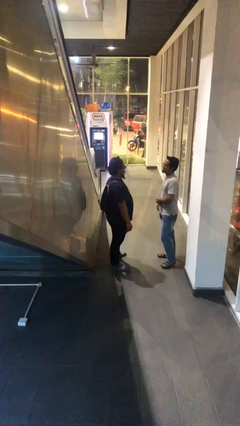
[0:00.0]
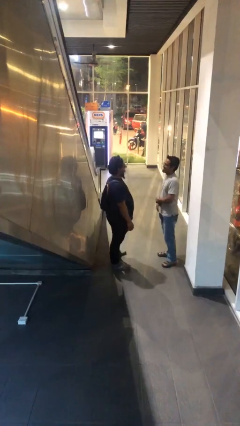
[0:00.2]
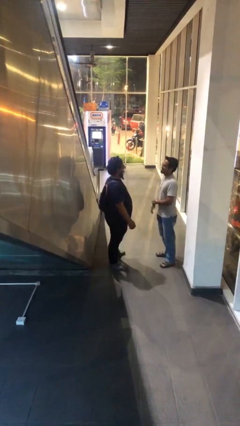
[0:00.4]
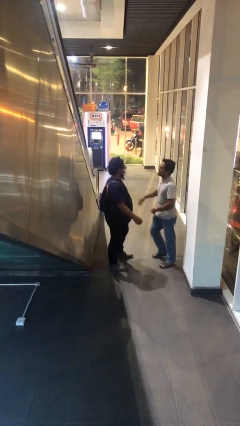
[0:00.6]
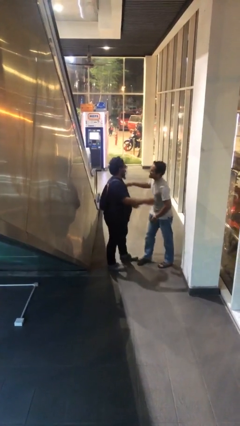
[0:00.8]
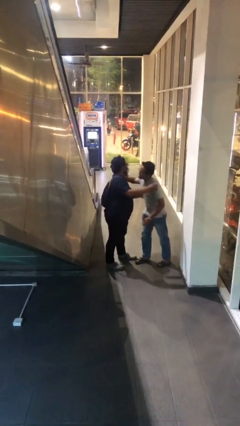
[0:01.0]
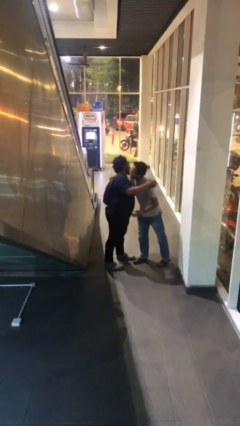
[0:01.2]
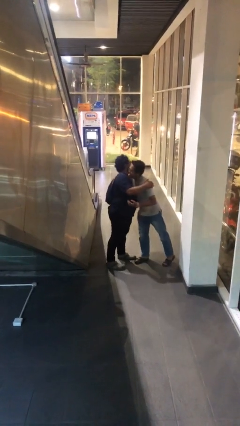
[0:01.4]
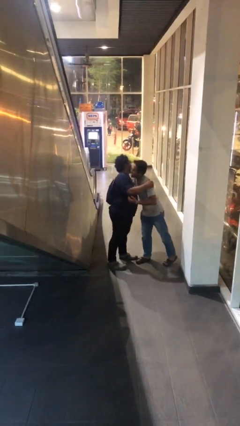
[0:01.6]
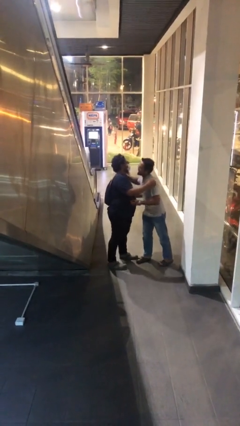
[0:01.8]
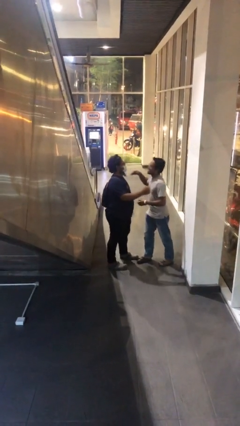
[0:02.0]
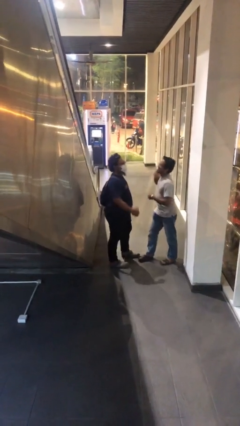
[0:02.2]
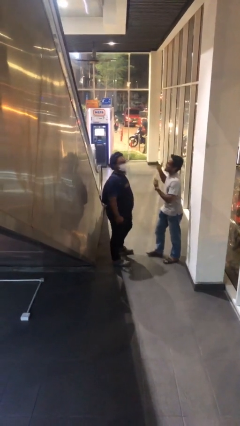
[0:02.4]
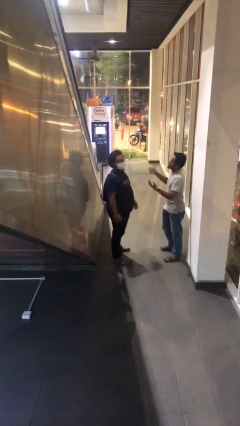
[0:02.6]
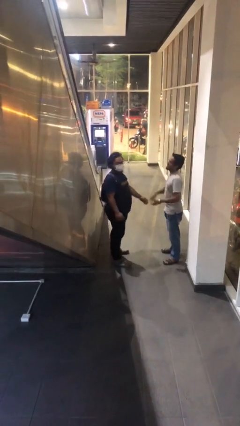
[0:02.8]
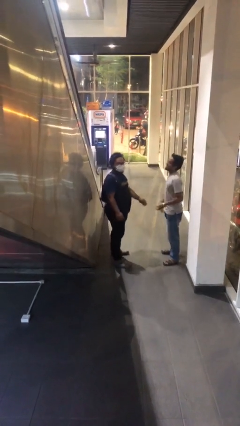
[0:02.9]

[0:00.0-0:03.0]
person embraces person

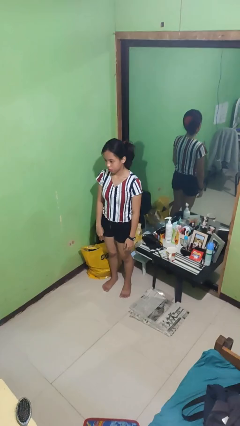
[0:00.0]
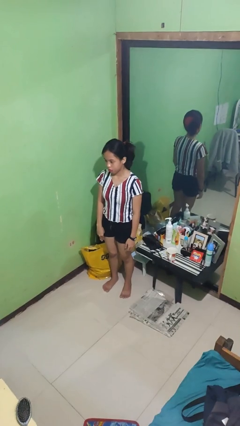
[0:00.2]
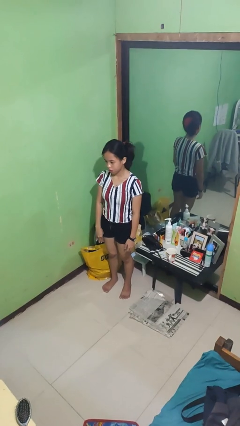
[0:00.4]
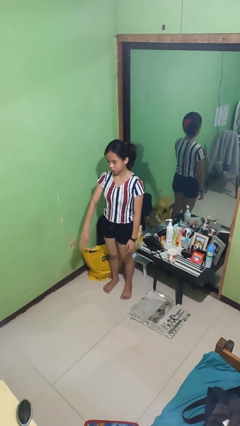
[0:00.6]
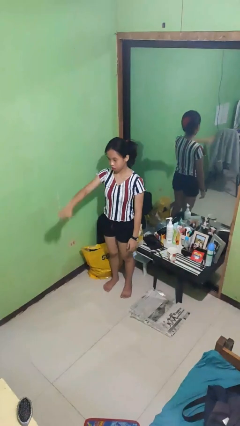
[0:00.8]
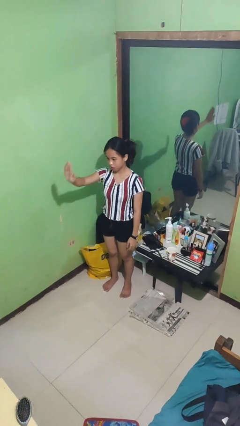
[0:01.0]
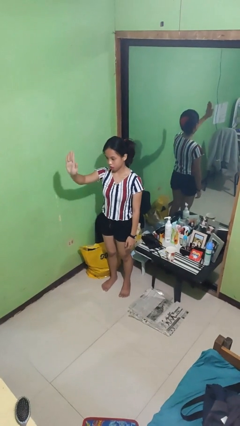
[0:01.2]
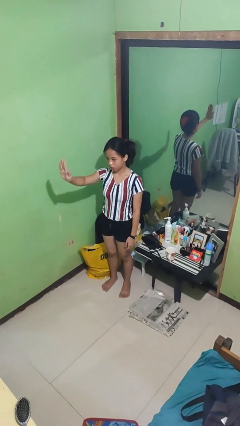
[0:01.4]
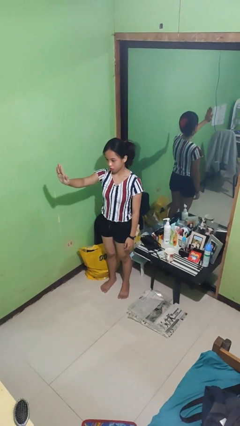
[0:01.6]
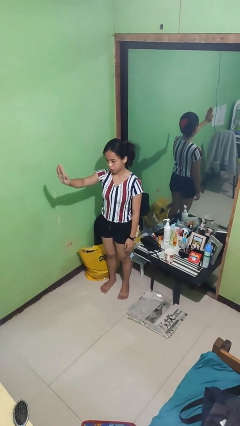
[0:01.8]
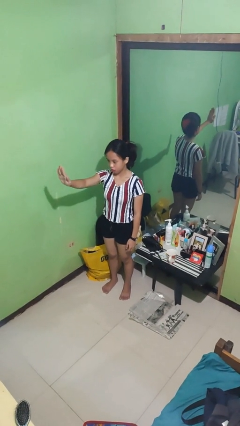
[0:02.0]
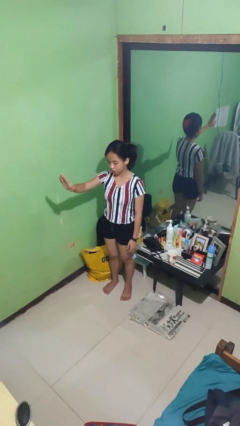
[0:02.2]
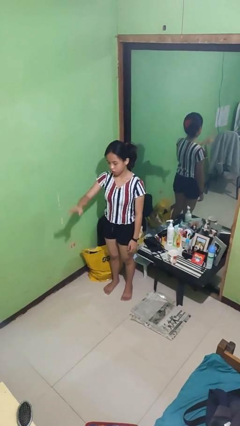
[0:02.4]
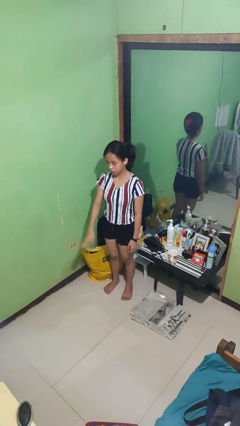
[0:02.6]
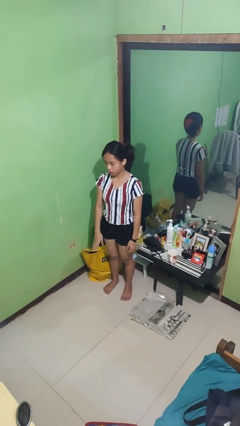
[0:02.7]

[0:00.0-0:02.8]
person gestures stop

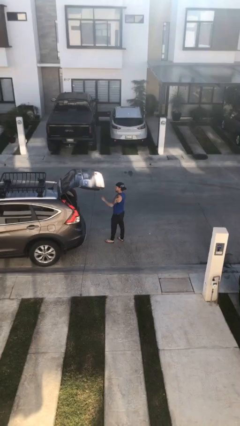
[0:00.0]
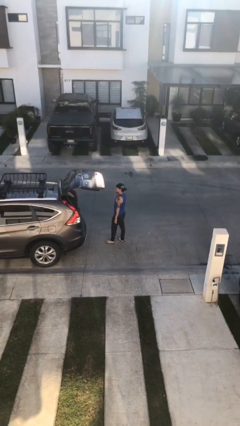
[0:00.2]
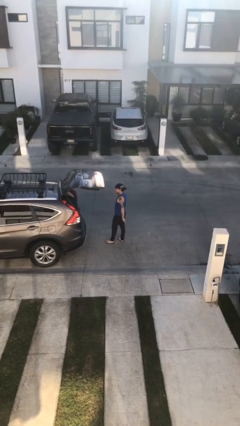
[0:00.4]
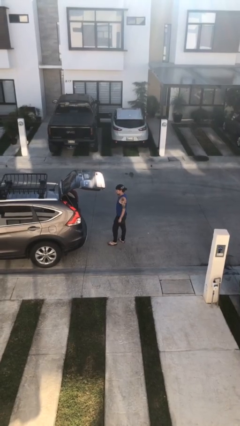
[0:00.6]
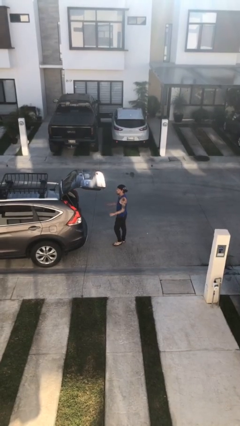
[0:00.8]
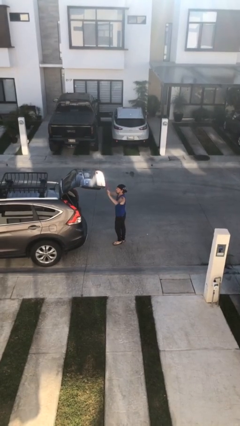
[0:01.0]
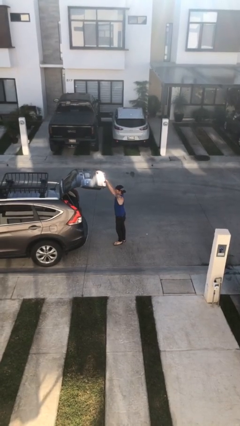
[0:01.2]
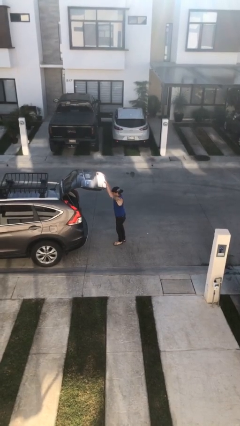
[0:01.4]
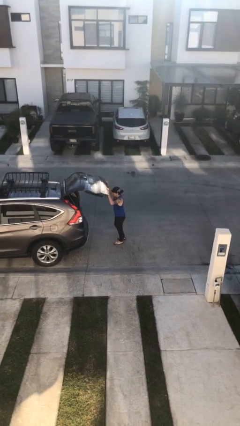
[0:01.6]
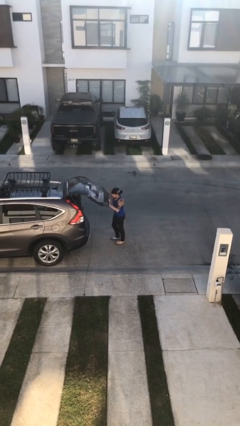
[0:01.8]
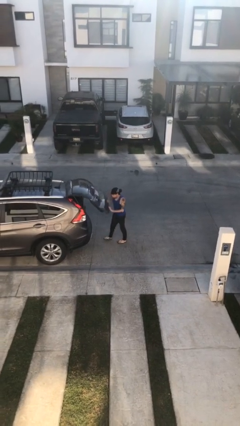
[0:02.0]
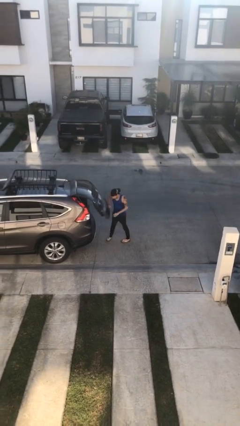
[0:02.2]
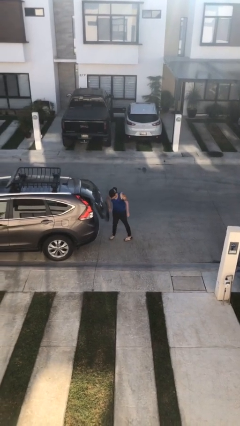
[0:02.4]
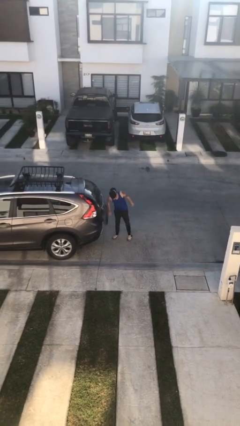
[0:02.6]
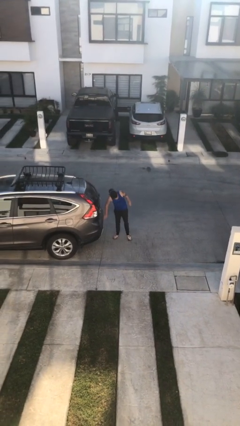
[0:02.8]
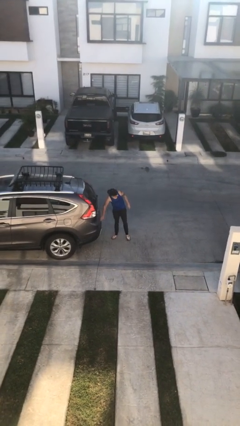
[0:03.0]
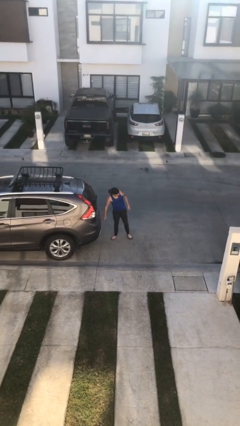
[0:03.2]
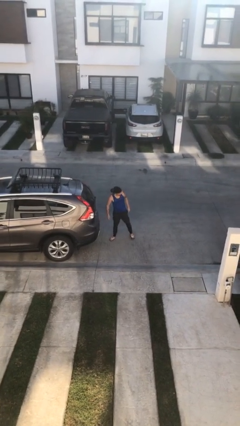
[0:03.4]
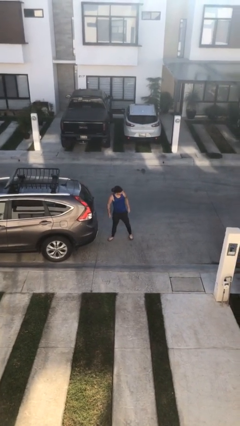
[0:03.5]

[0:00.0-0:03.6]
person closes car trunk

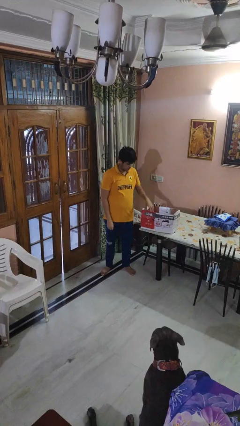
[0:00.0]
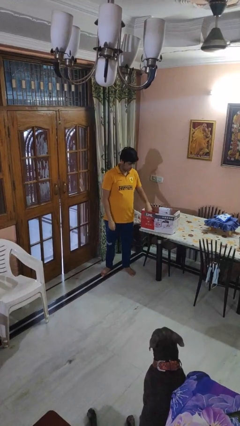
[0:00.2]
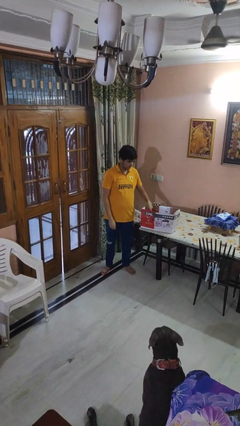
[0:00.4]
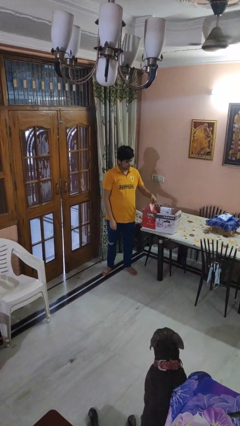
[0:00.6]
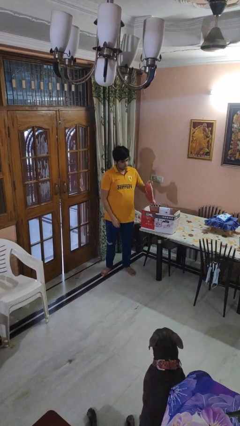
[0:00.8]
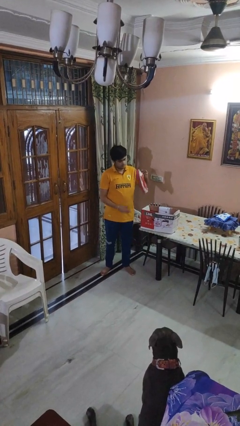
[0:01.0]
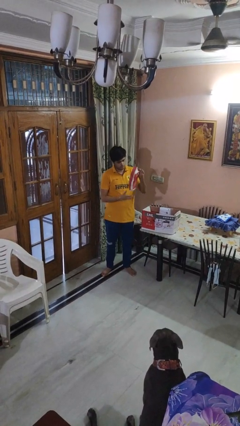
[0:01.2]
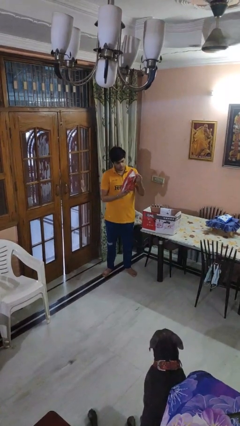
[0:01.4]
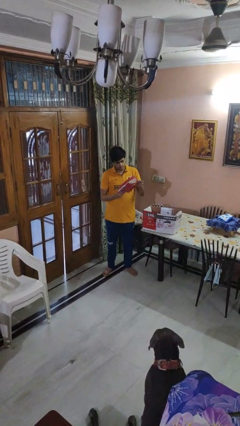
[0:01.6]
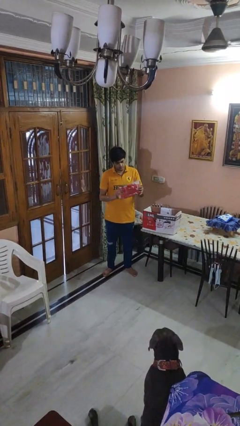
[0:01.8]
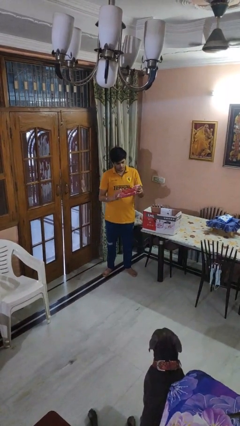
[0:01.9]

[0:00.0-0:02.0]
person takes object from box

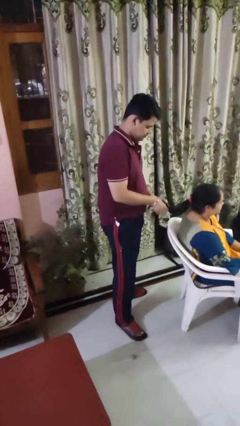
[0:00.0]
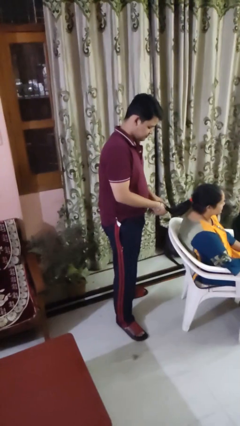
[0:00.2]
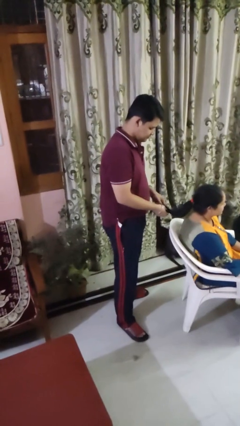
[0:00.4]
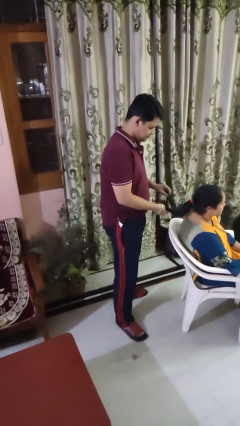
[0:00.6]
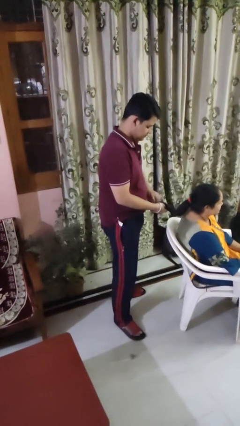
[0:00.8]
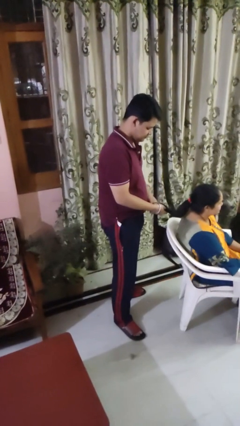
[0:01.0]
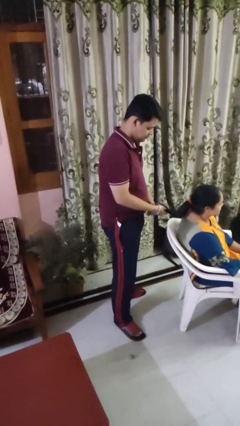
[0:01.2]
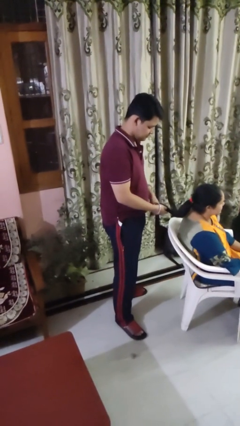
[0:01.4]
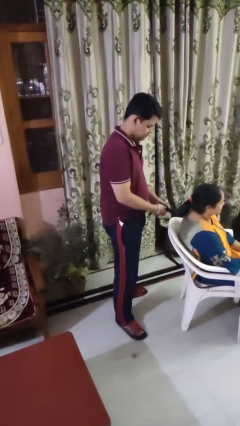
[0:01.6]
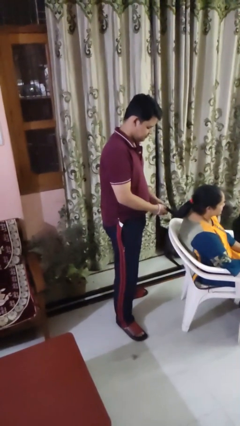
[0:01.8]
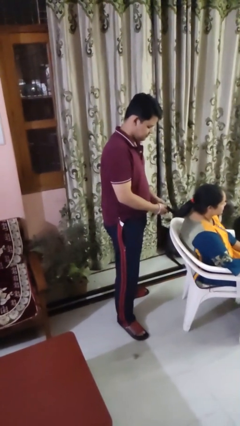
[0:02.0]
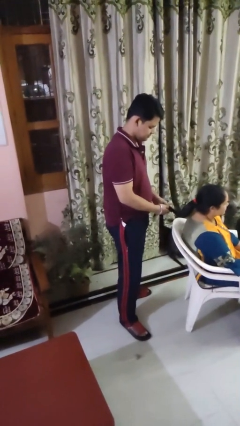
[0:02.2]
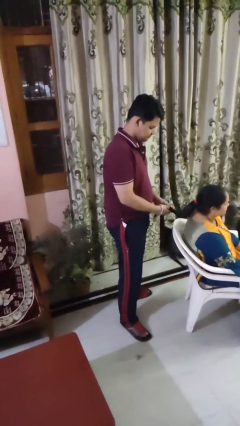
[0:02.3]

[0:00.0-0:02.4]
person braids hair of person

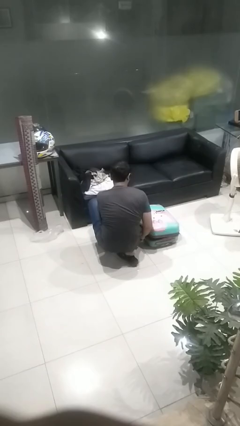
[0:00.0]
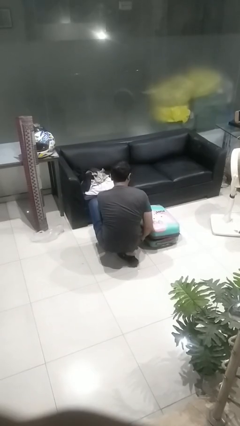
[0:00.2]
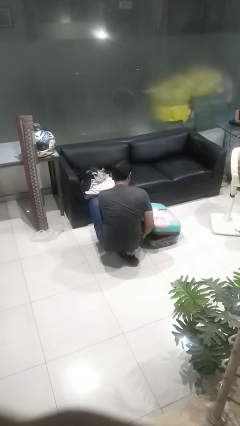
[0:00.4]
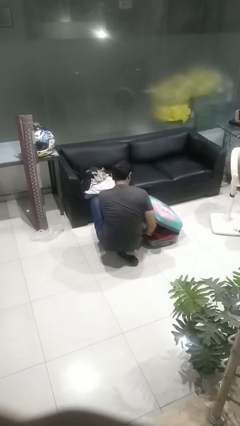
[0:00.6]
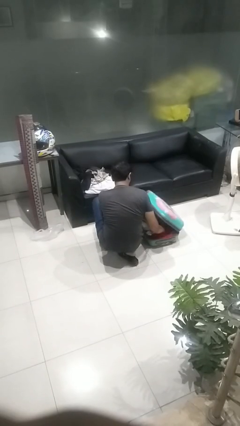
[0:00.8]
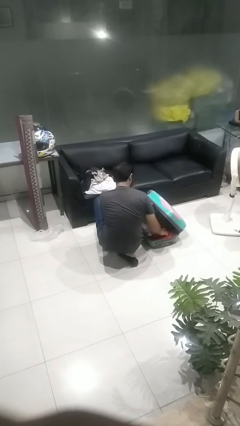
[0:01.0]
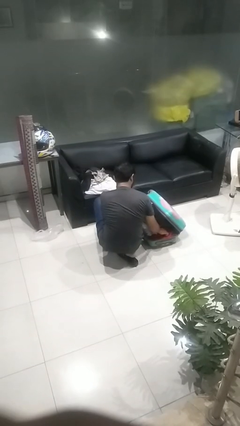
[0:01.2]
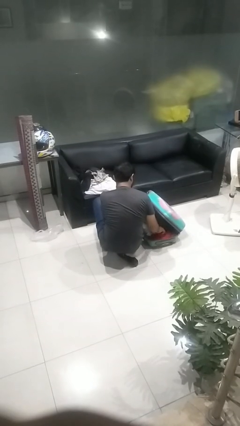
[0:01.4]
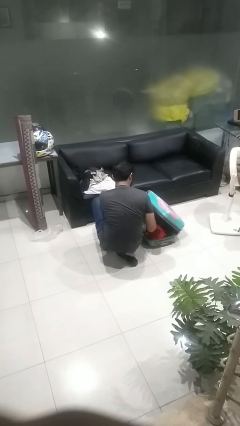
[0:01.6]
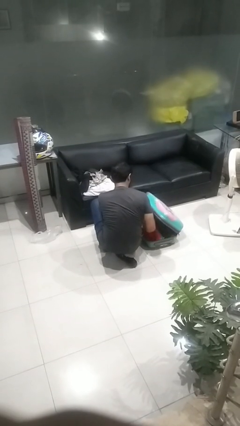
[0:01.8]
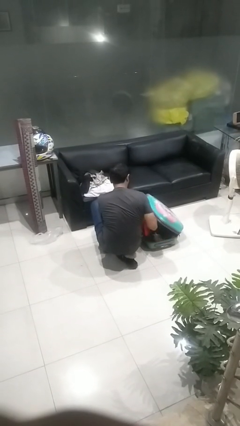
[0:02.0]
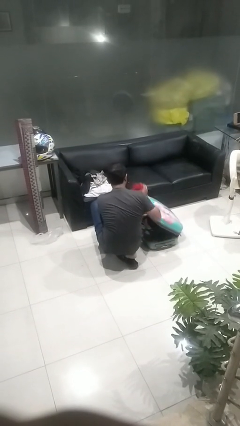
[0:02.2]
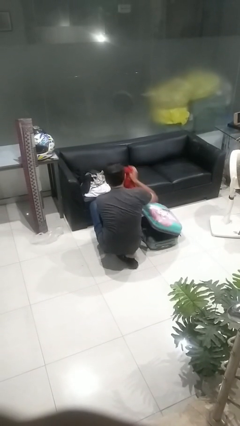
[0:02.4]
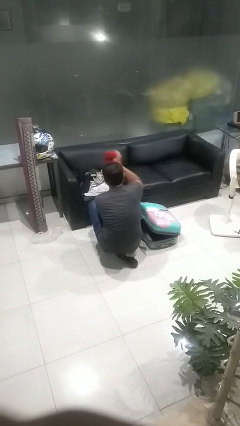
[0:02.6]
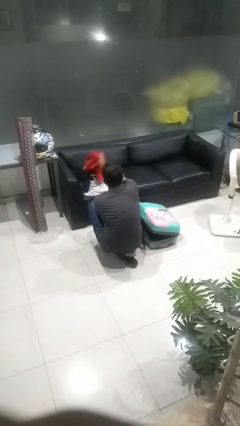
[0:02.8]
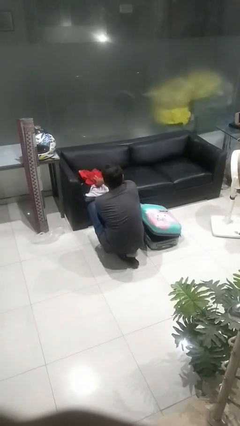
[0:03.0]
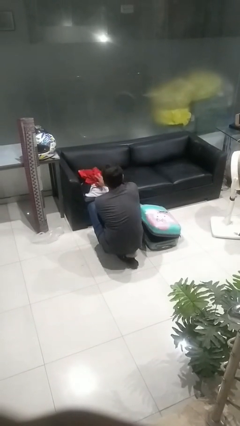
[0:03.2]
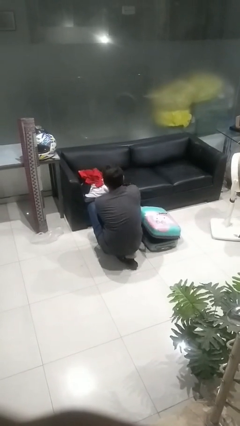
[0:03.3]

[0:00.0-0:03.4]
person unloads clothes from suitcase
